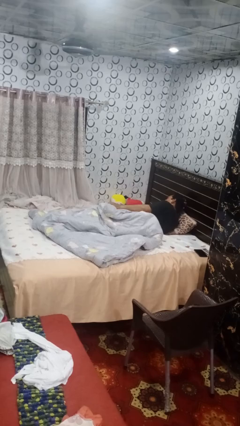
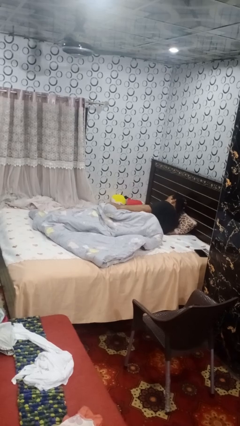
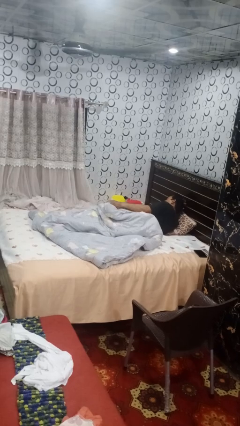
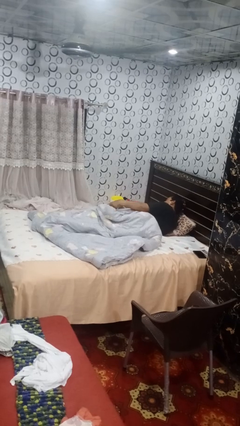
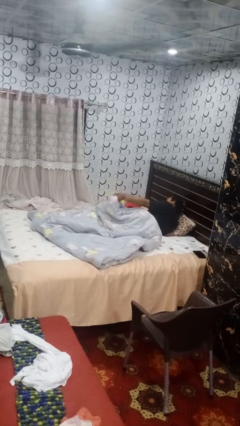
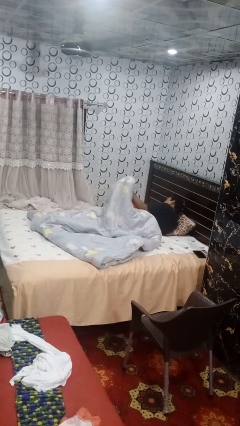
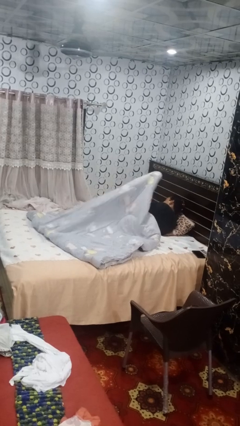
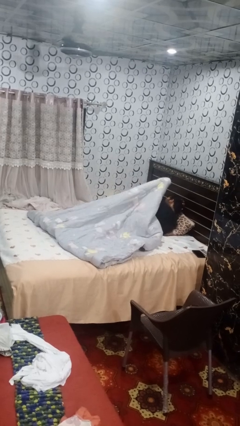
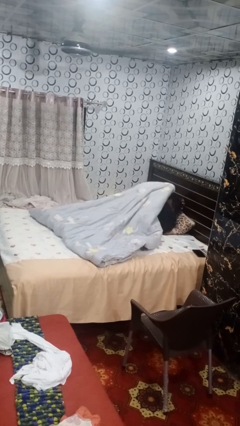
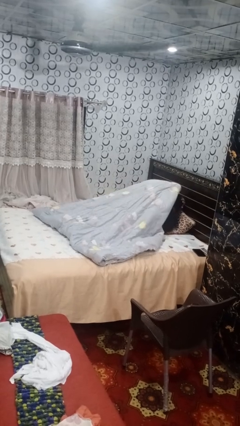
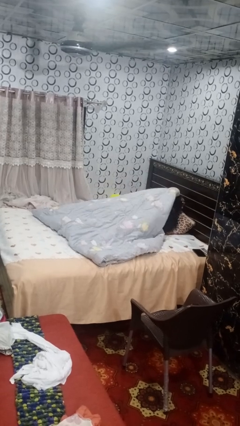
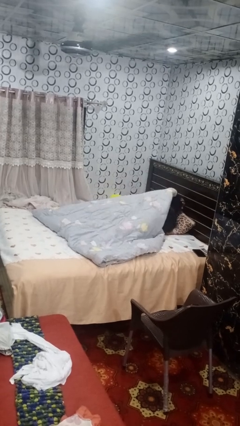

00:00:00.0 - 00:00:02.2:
person covers with blanket

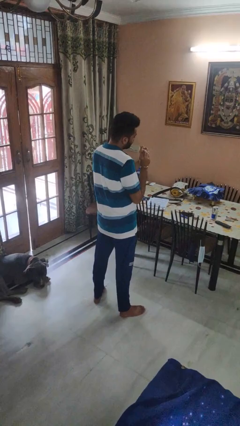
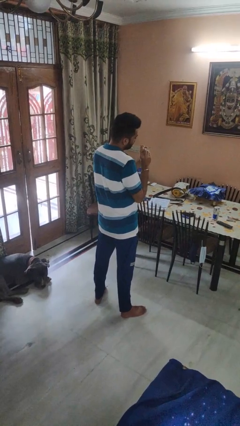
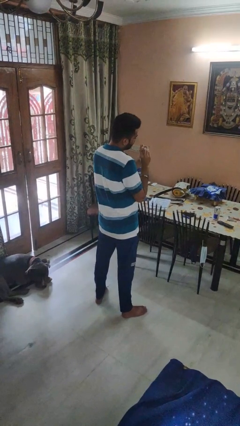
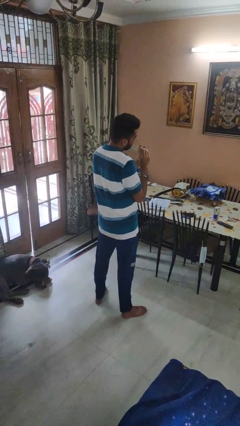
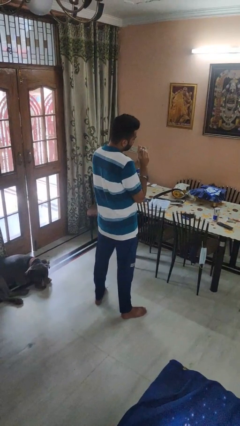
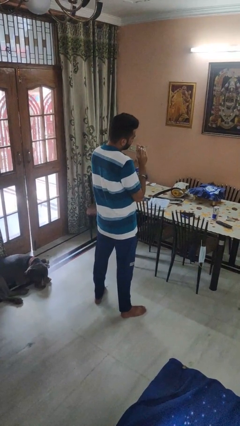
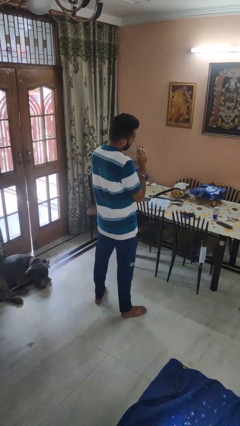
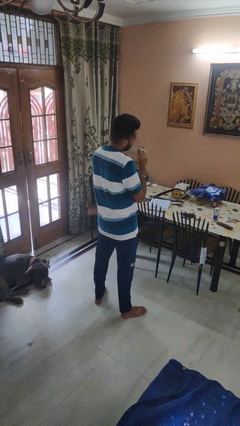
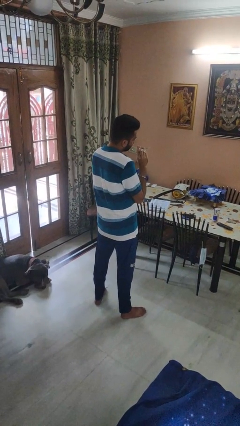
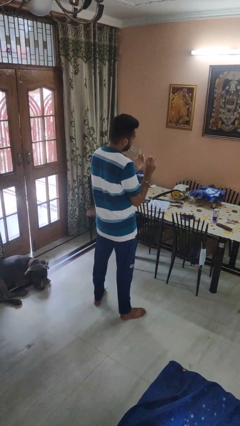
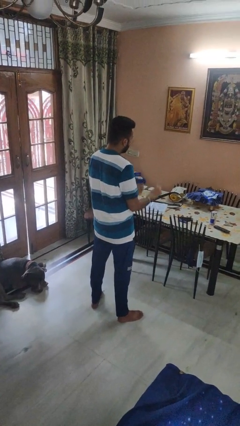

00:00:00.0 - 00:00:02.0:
person files fingernails

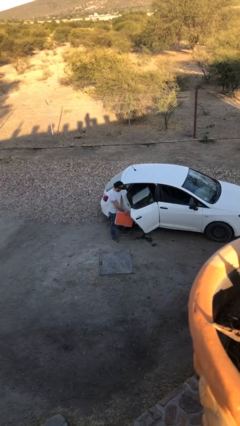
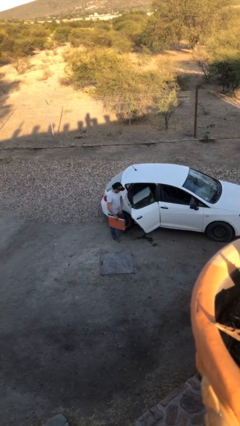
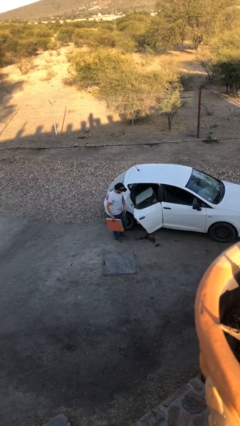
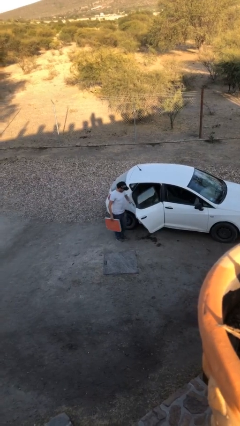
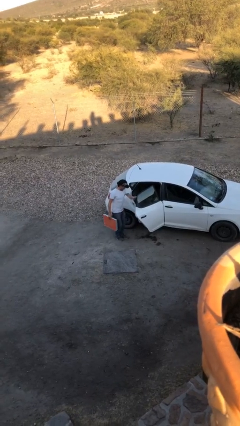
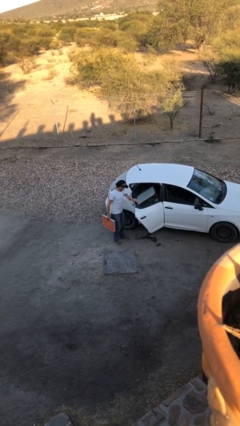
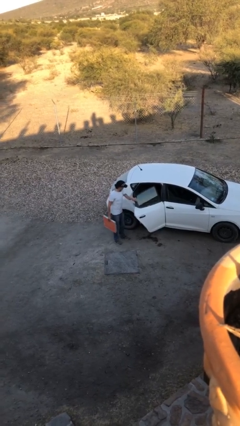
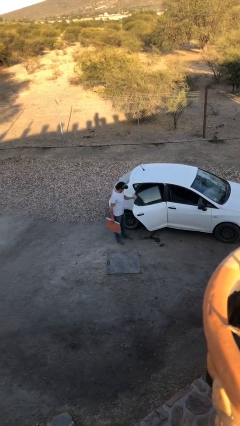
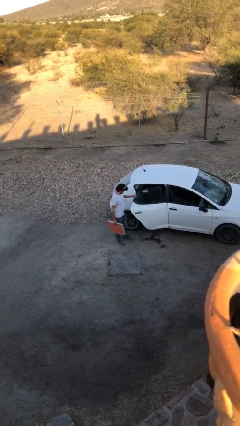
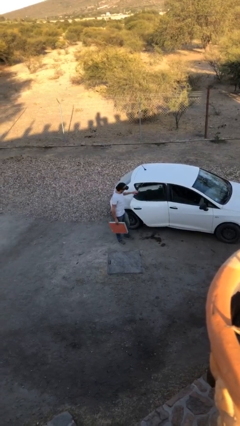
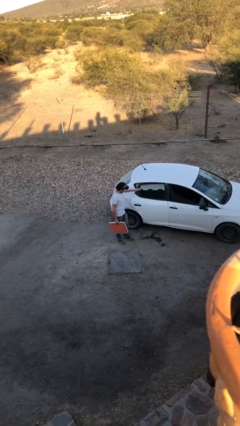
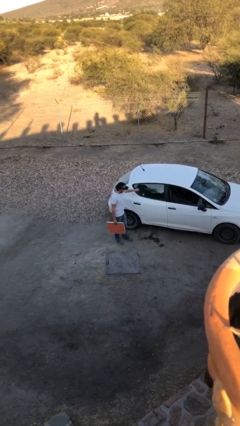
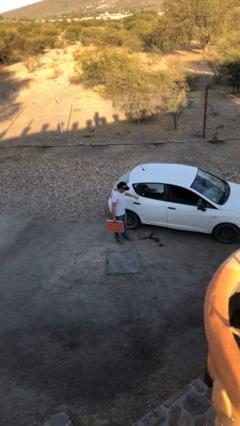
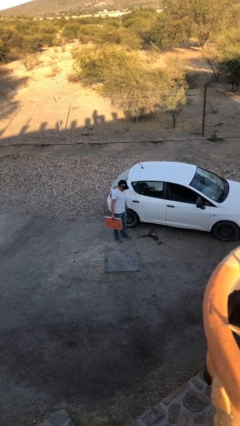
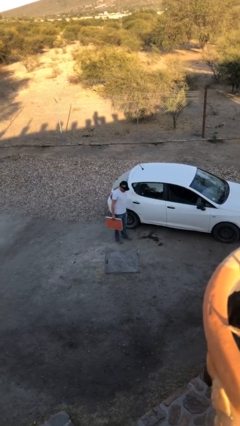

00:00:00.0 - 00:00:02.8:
person closes car door

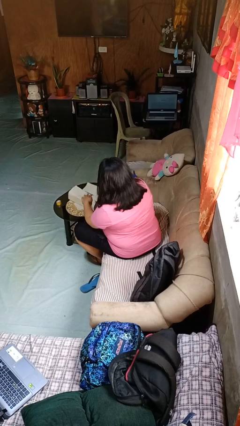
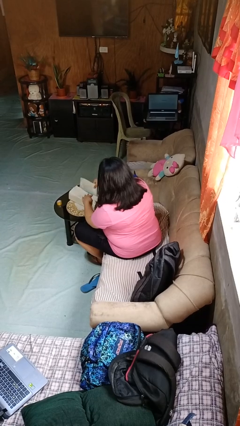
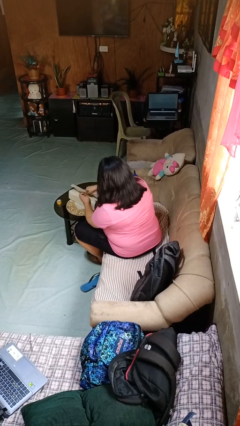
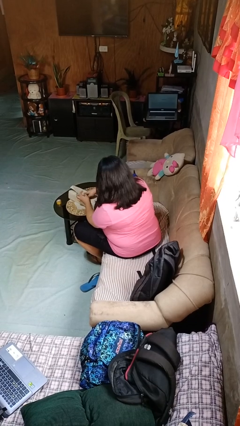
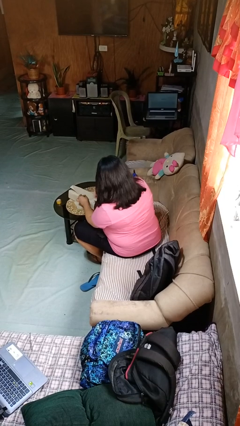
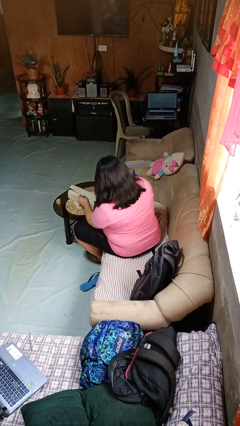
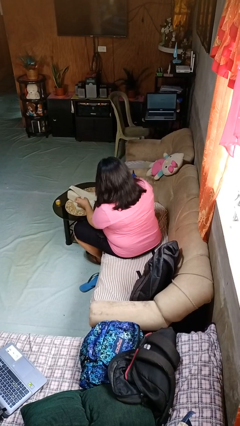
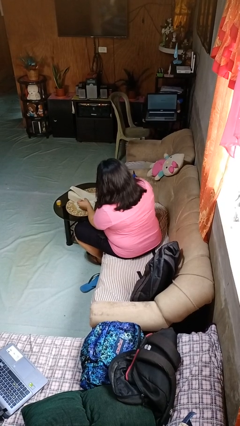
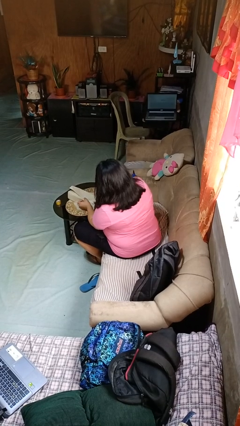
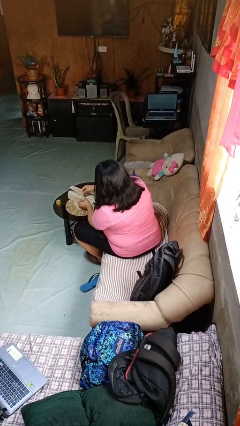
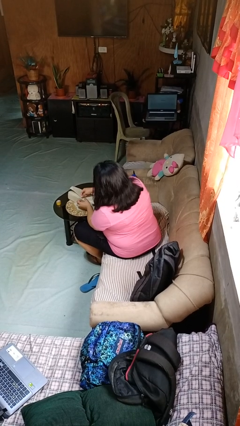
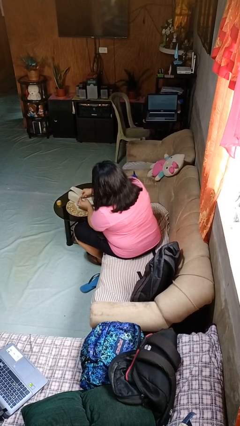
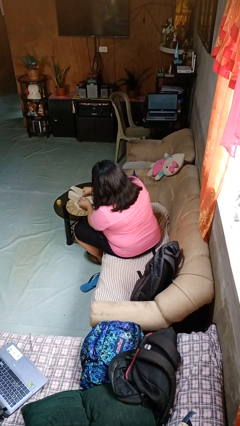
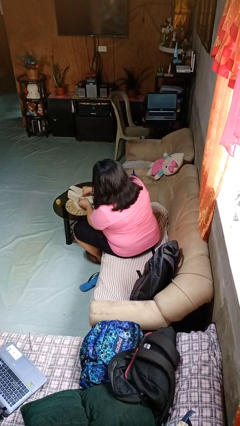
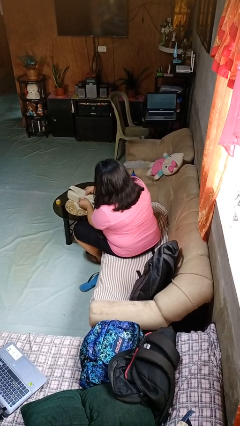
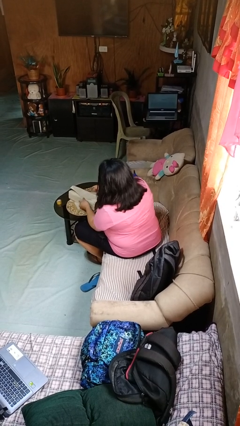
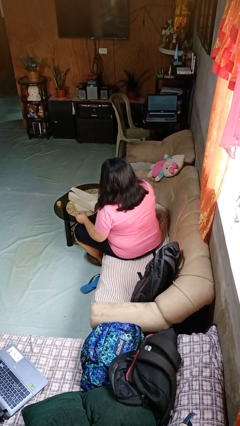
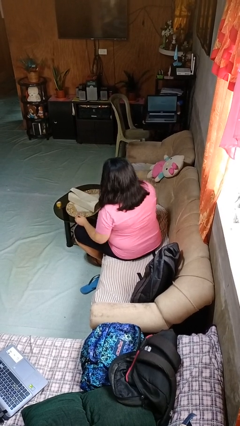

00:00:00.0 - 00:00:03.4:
person wraps box

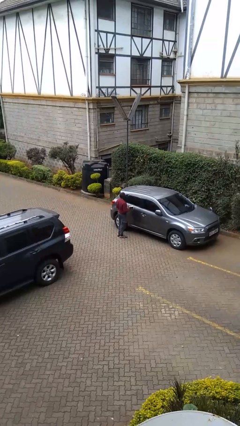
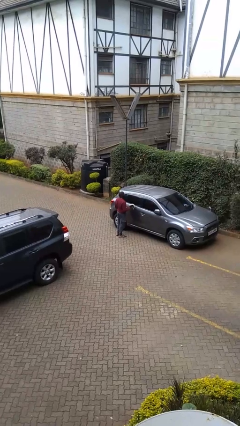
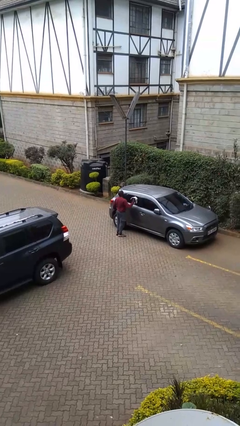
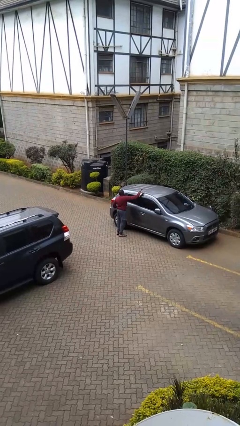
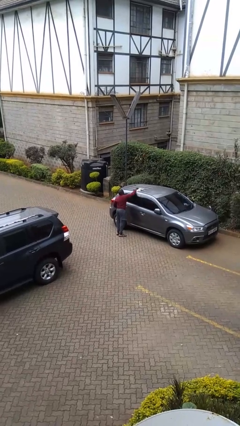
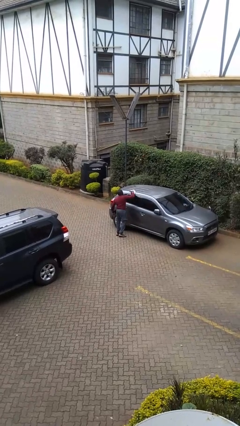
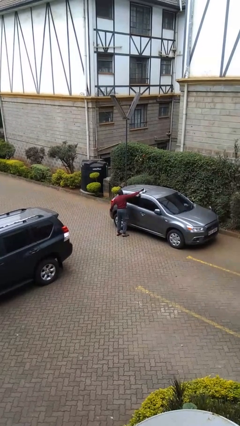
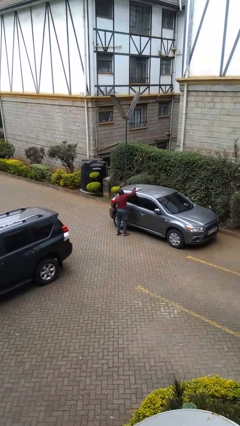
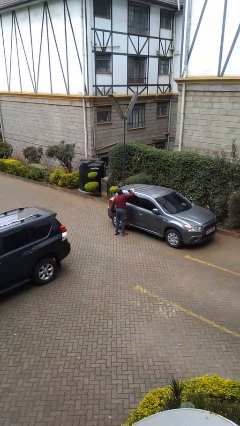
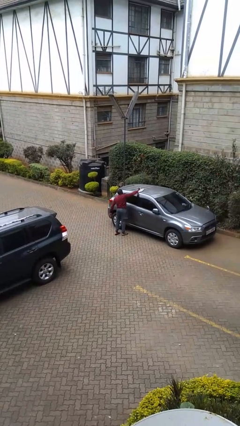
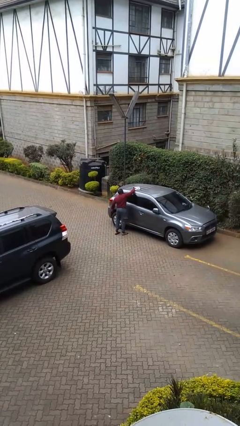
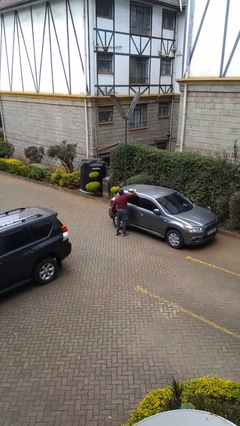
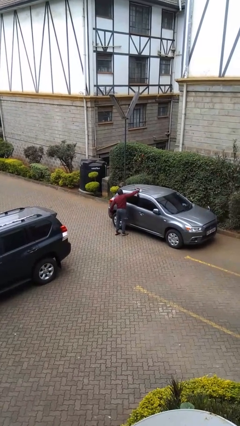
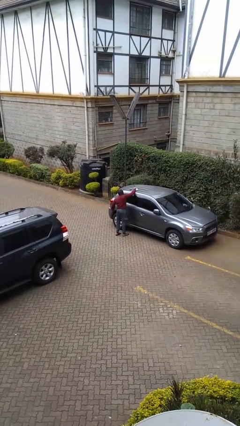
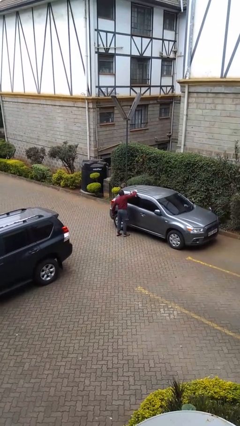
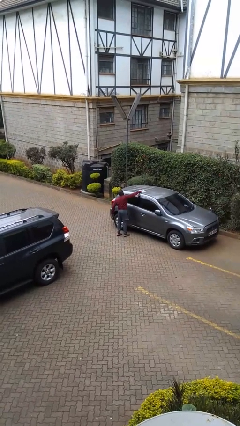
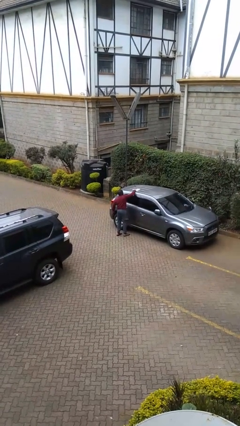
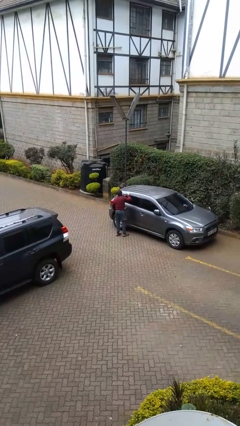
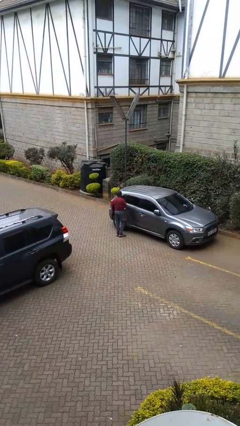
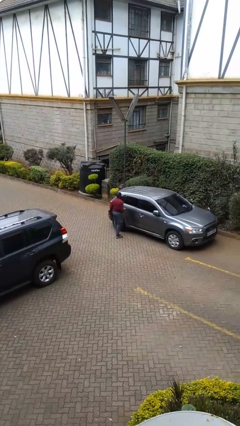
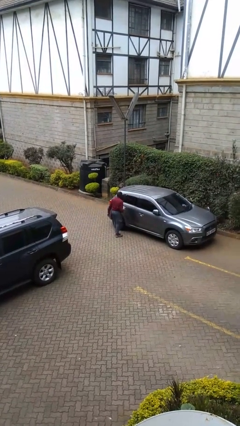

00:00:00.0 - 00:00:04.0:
person polishes car with rag

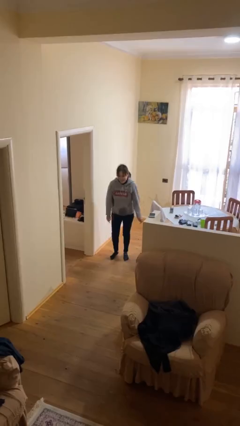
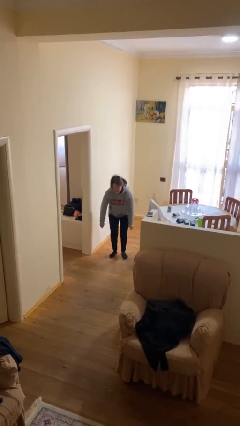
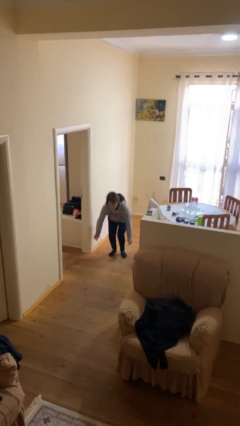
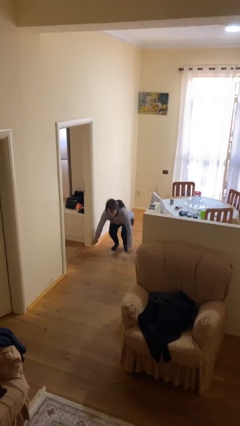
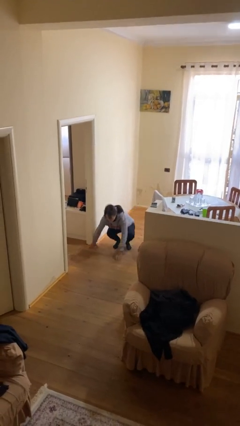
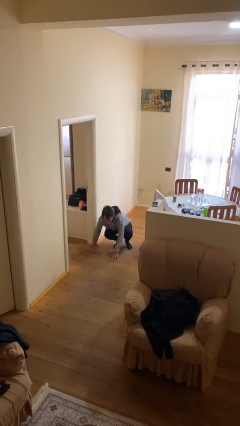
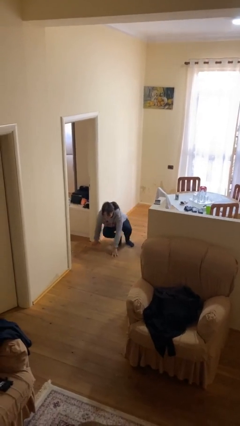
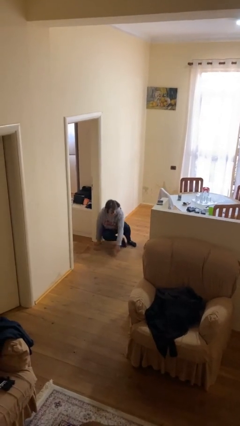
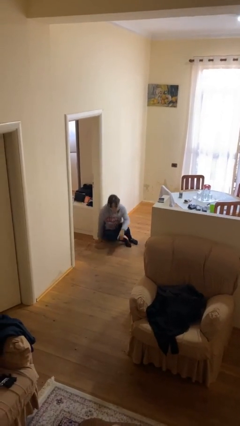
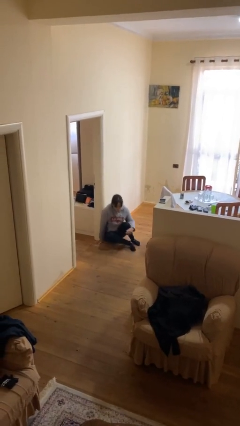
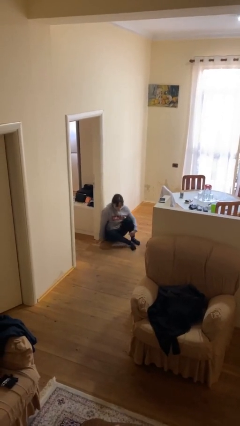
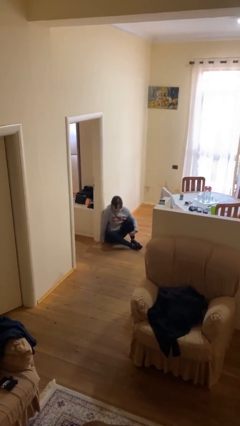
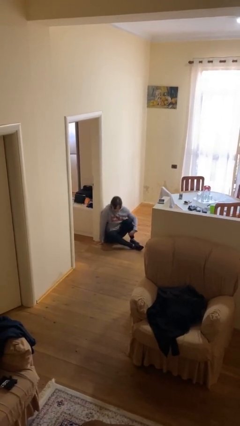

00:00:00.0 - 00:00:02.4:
person sits down

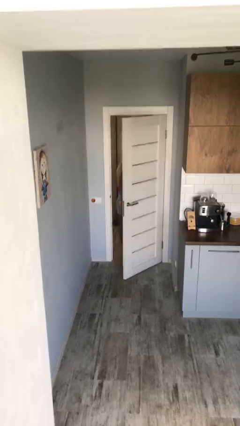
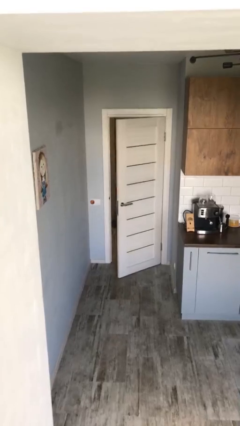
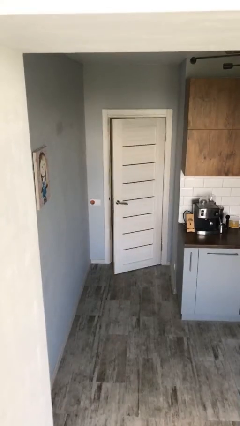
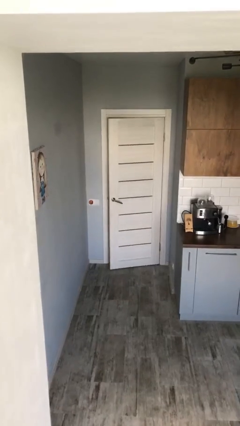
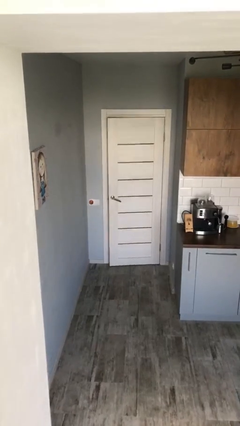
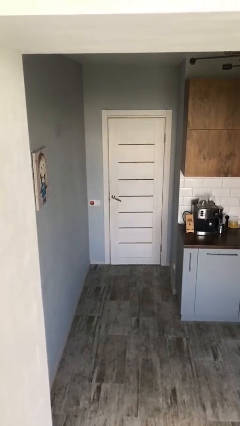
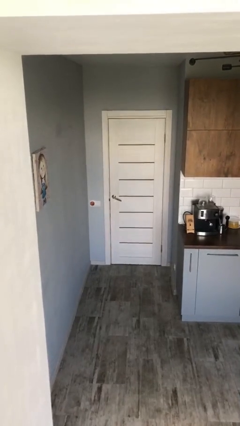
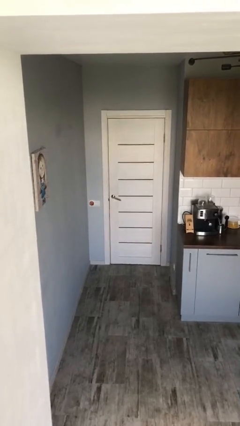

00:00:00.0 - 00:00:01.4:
person closes facility door
